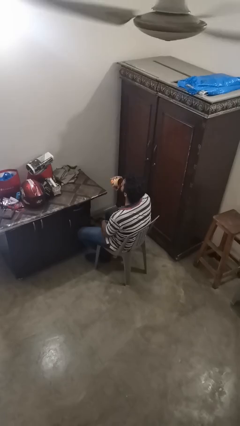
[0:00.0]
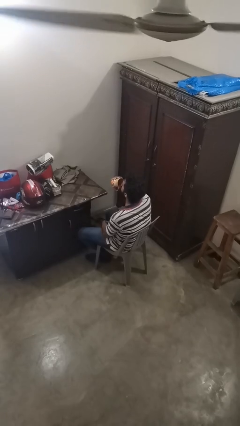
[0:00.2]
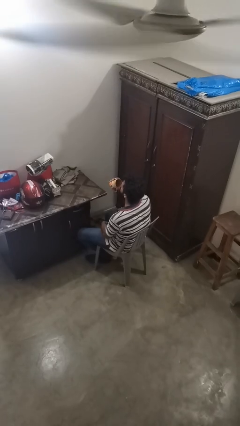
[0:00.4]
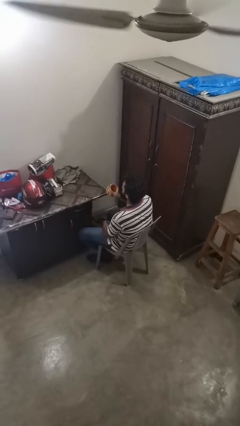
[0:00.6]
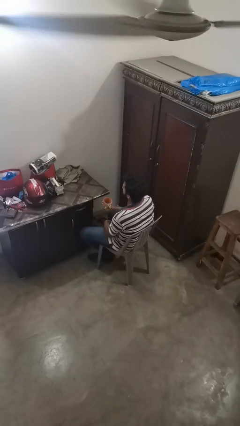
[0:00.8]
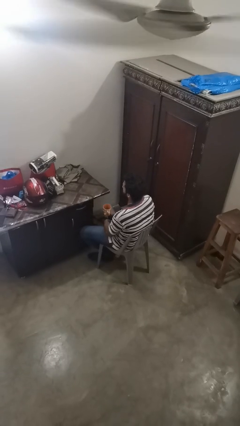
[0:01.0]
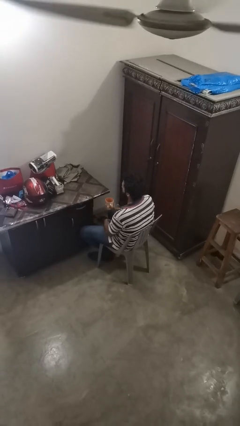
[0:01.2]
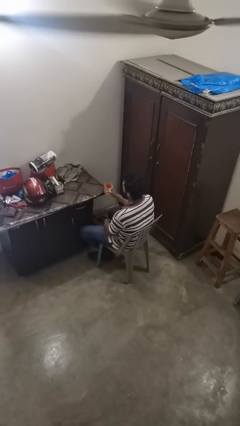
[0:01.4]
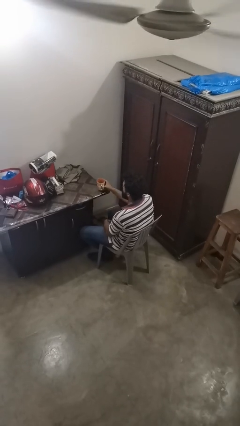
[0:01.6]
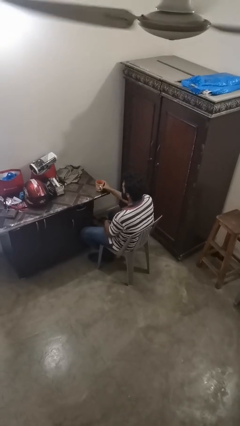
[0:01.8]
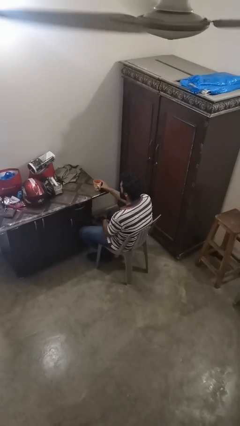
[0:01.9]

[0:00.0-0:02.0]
person puts down object on table

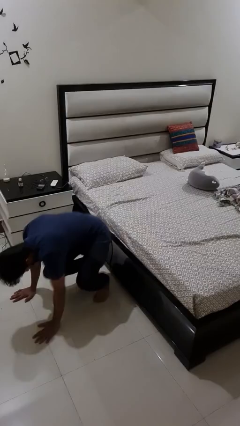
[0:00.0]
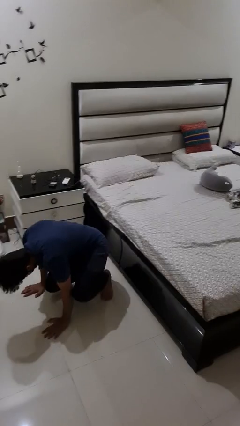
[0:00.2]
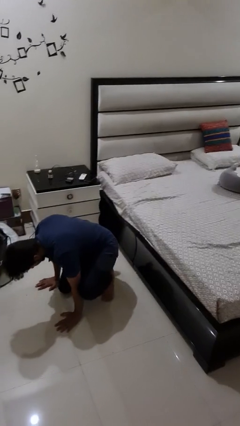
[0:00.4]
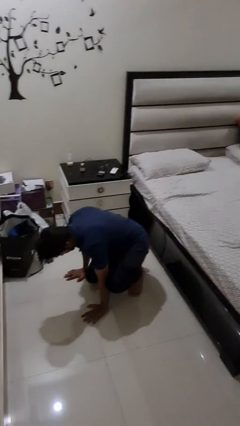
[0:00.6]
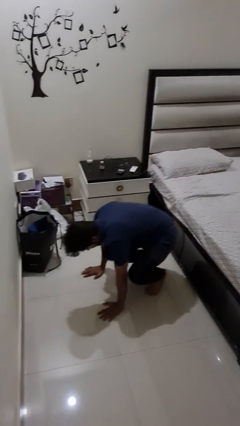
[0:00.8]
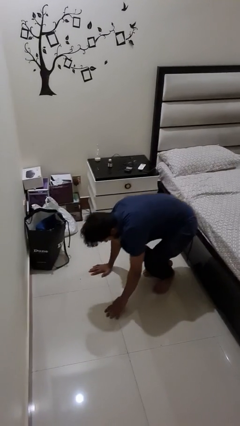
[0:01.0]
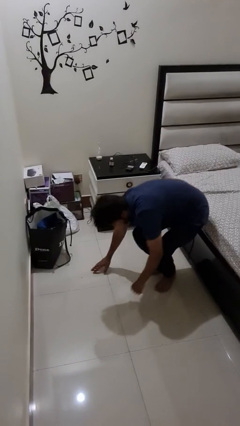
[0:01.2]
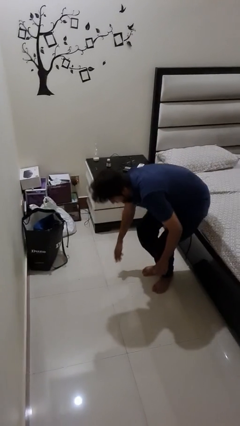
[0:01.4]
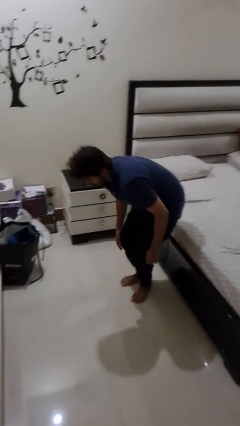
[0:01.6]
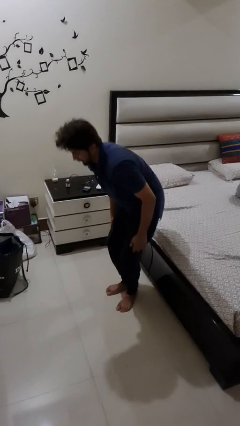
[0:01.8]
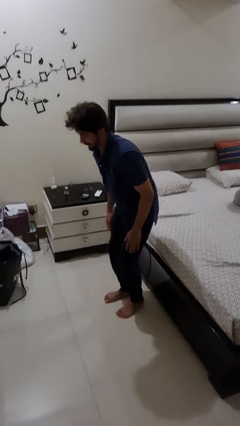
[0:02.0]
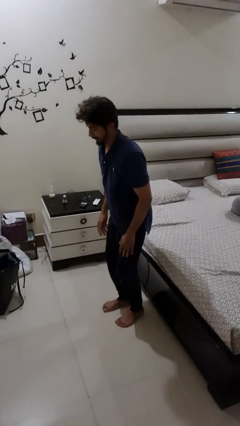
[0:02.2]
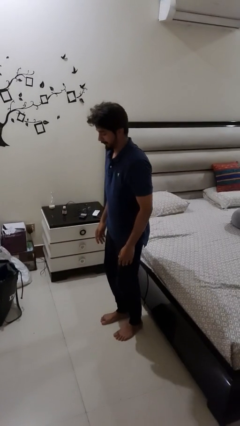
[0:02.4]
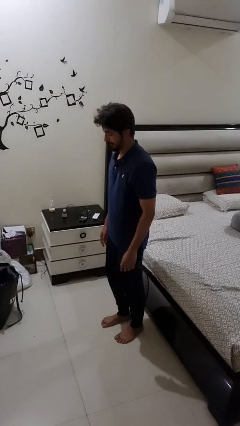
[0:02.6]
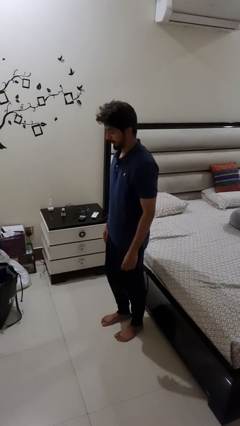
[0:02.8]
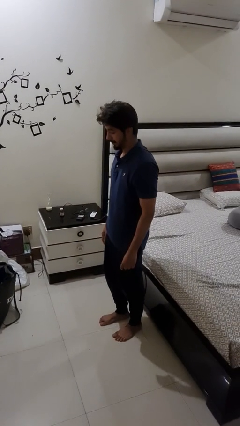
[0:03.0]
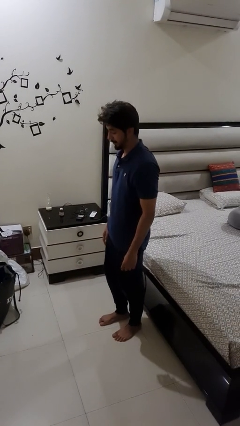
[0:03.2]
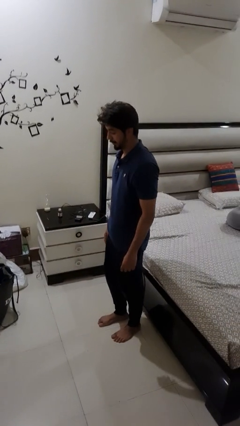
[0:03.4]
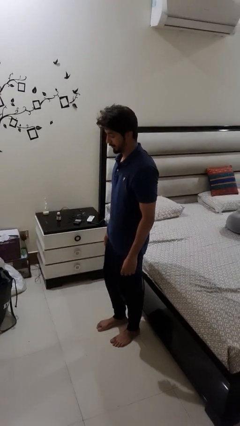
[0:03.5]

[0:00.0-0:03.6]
person stands up from floor

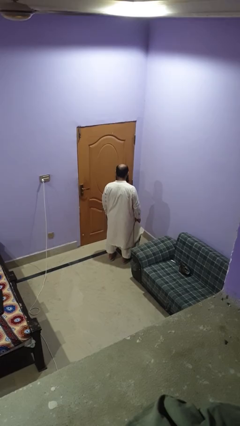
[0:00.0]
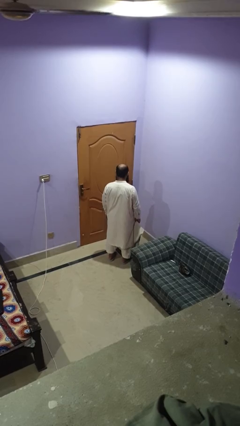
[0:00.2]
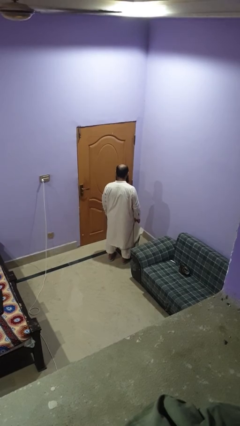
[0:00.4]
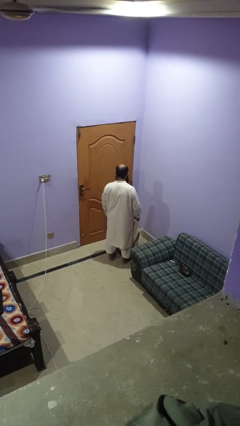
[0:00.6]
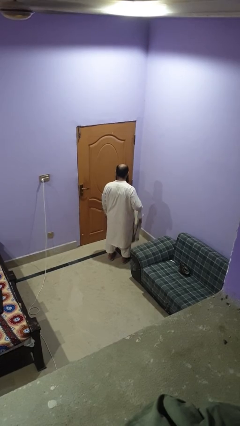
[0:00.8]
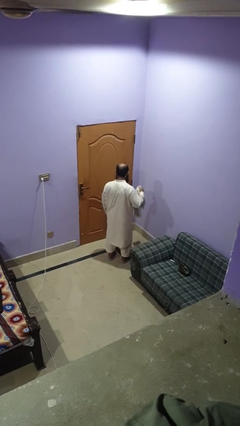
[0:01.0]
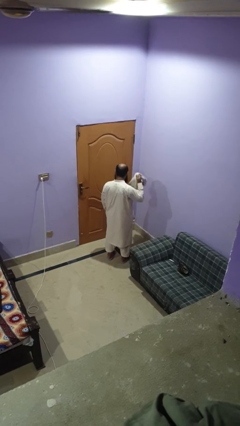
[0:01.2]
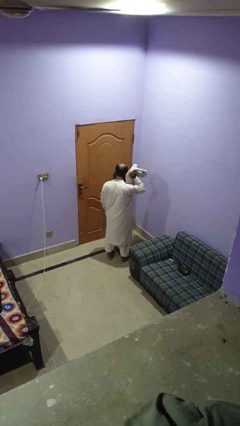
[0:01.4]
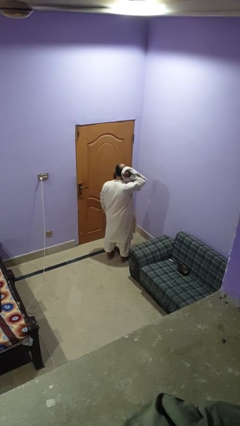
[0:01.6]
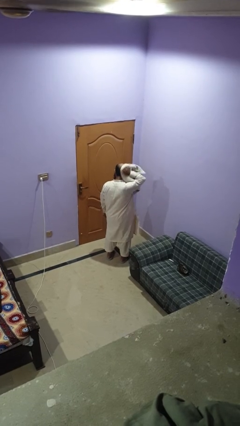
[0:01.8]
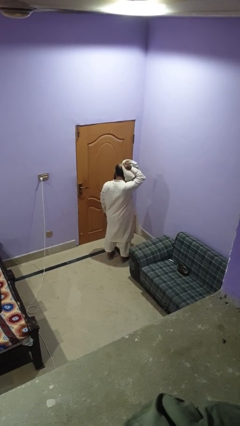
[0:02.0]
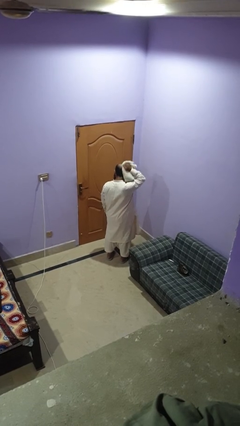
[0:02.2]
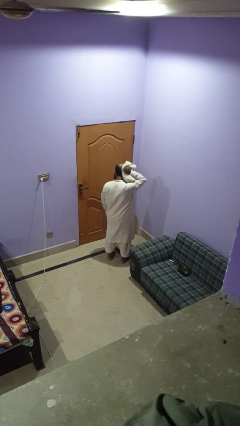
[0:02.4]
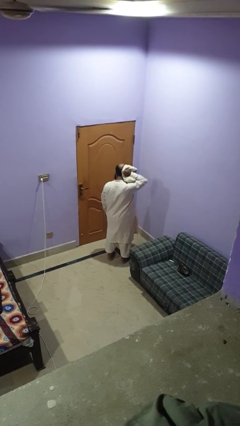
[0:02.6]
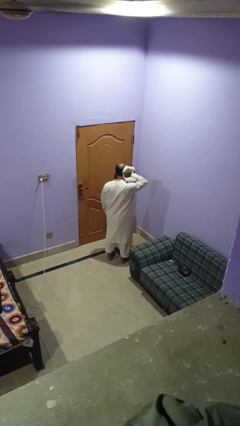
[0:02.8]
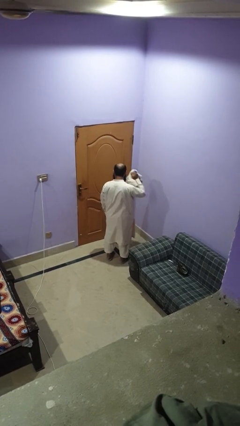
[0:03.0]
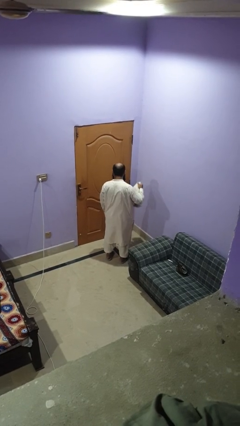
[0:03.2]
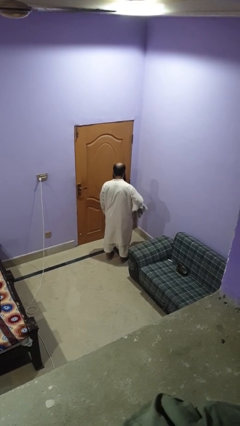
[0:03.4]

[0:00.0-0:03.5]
person dries hair with towel

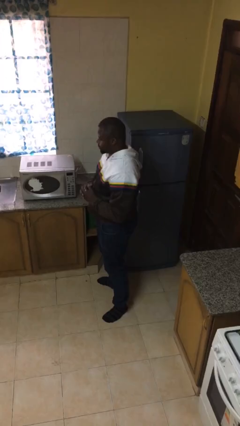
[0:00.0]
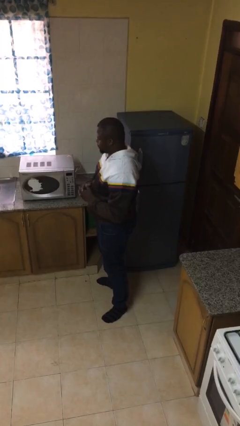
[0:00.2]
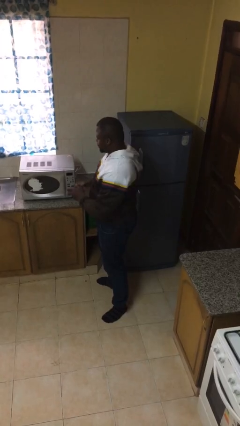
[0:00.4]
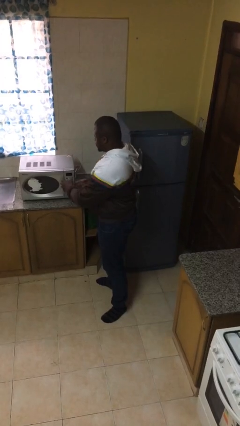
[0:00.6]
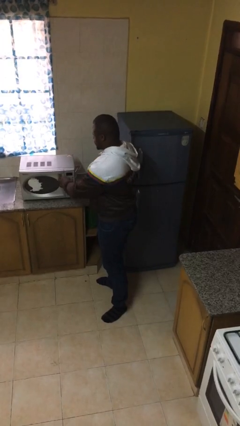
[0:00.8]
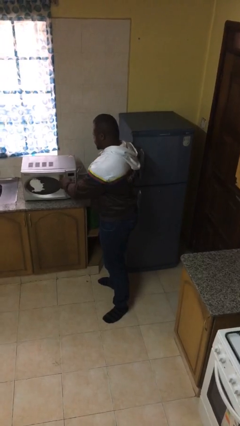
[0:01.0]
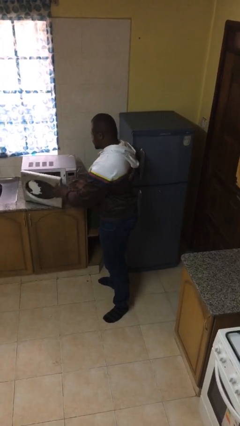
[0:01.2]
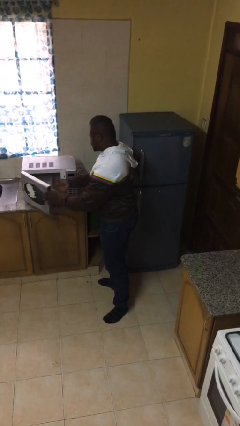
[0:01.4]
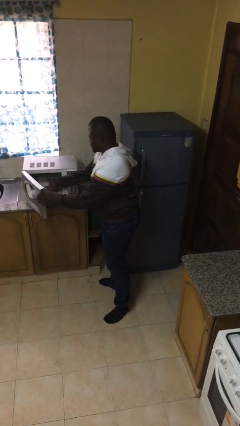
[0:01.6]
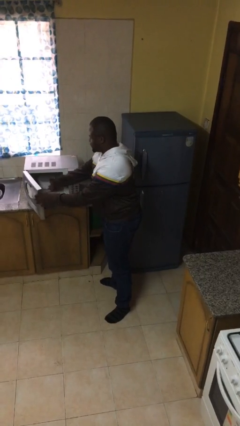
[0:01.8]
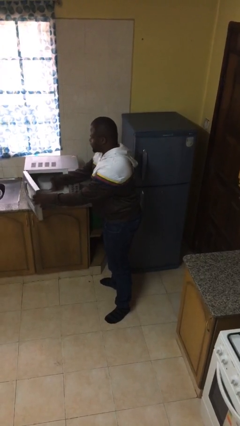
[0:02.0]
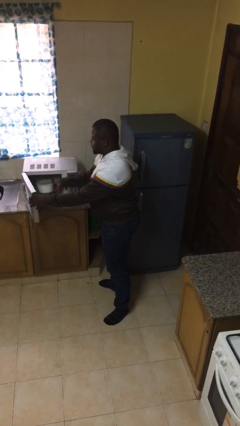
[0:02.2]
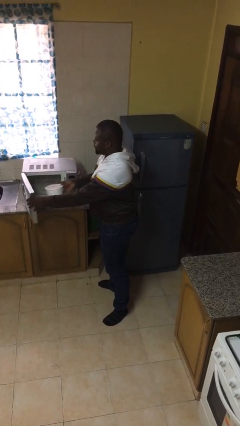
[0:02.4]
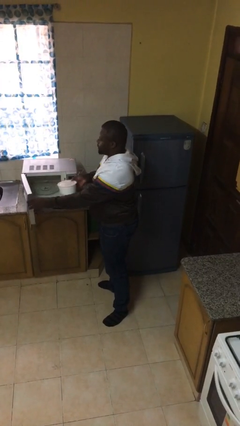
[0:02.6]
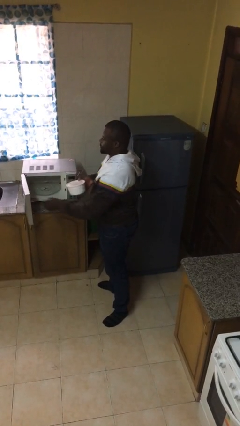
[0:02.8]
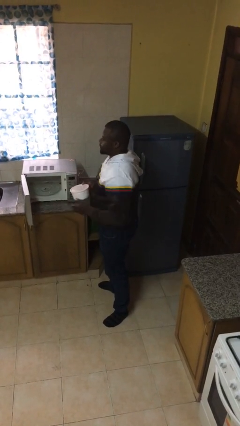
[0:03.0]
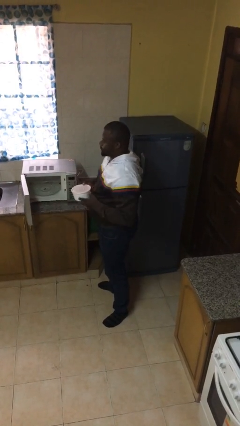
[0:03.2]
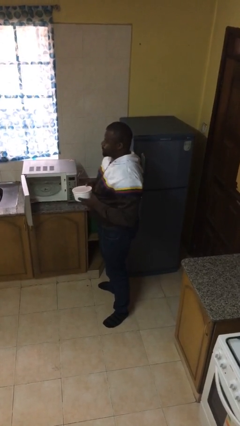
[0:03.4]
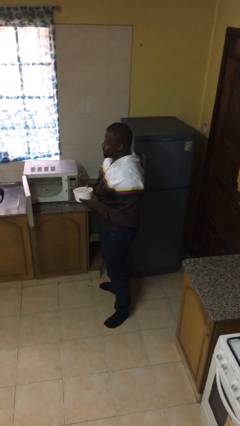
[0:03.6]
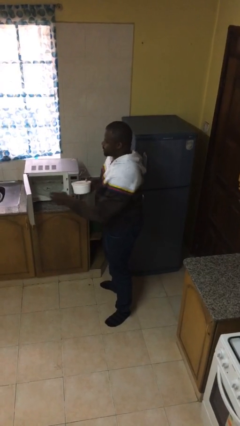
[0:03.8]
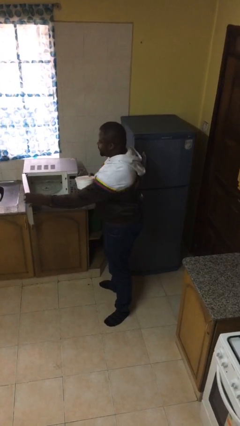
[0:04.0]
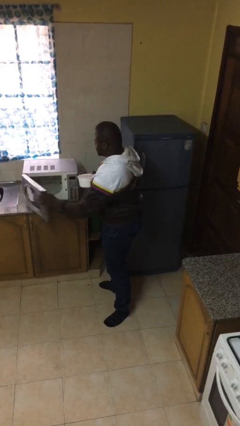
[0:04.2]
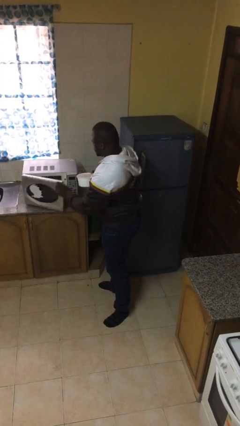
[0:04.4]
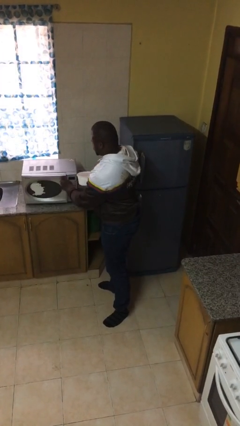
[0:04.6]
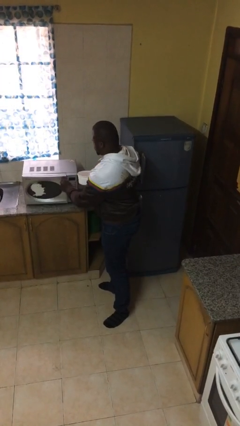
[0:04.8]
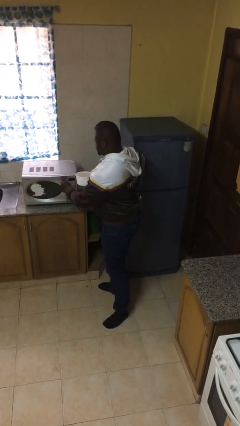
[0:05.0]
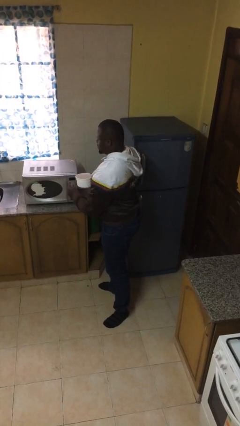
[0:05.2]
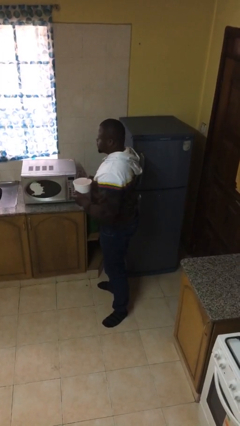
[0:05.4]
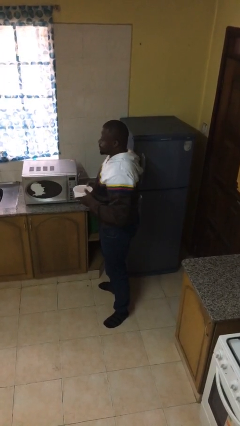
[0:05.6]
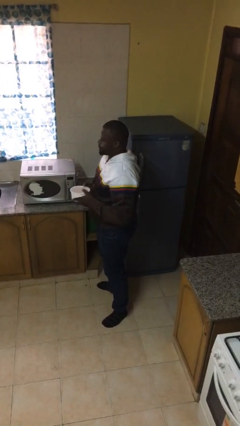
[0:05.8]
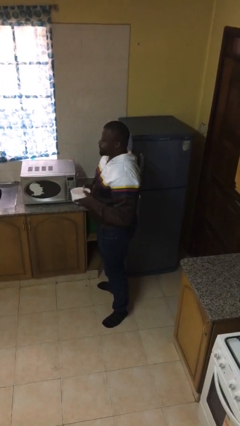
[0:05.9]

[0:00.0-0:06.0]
person takes object from microwave

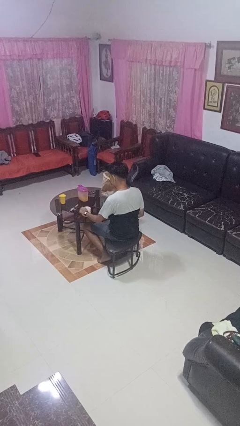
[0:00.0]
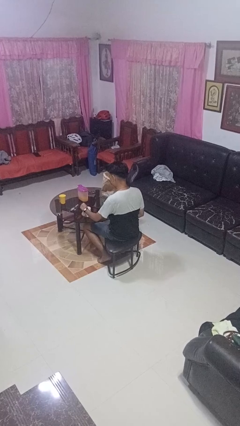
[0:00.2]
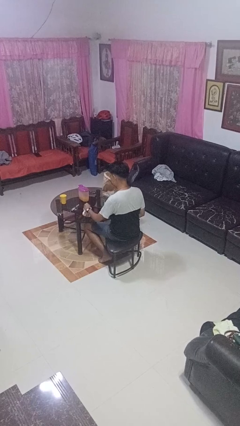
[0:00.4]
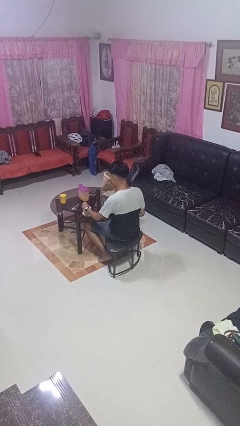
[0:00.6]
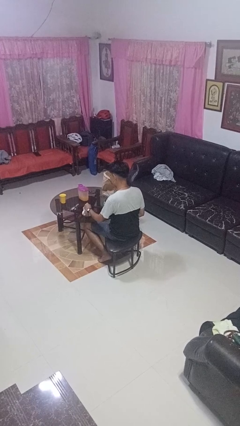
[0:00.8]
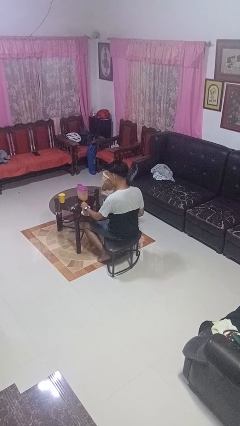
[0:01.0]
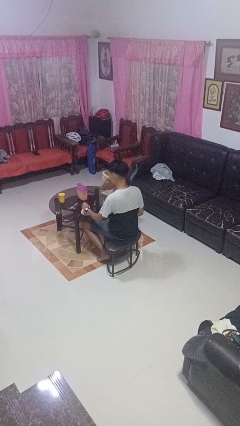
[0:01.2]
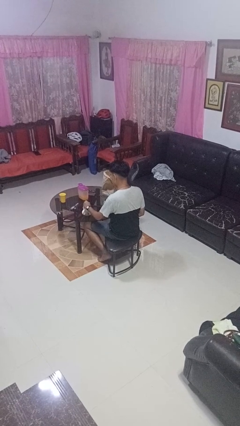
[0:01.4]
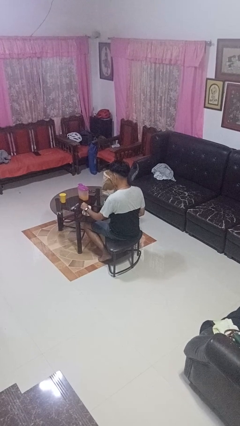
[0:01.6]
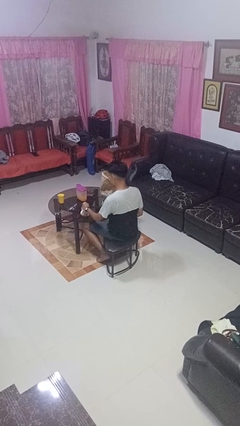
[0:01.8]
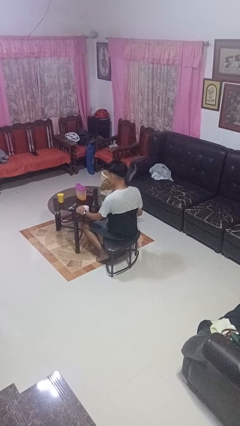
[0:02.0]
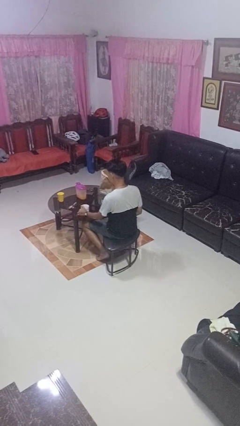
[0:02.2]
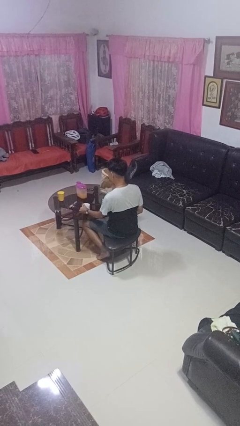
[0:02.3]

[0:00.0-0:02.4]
person stirs mug
